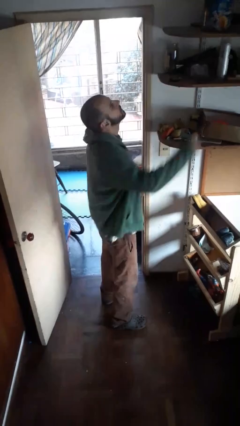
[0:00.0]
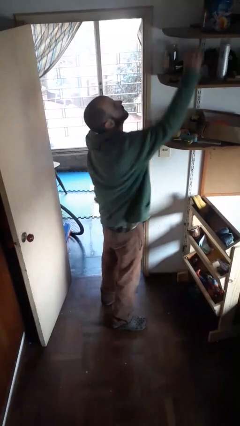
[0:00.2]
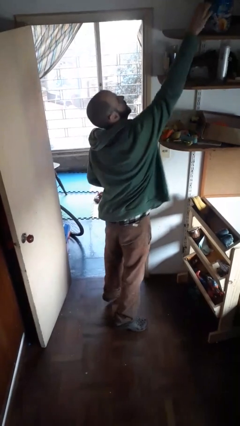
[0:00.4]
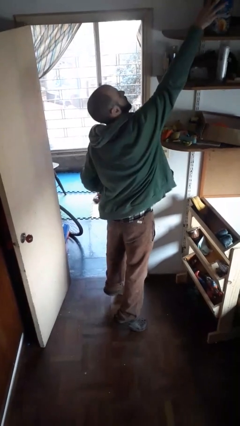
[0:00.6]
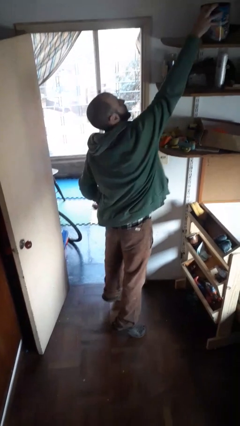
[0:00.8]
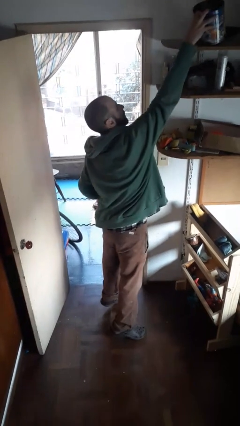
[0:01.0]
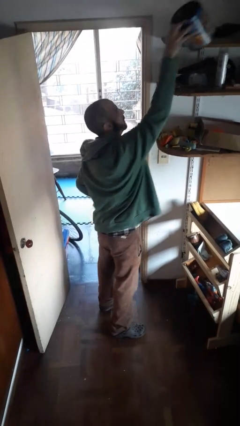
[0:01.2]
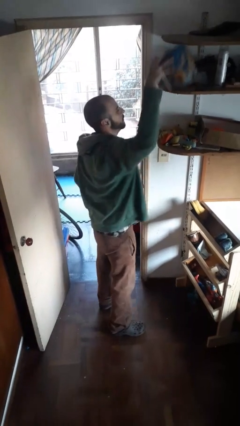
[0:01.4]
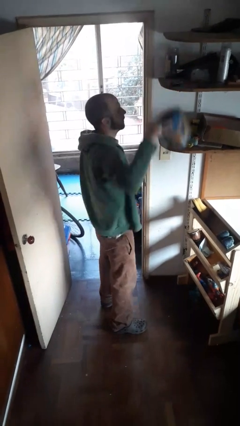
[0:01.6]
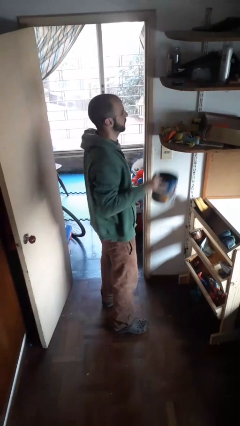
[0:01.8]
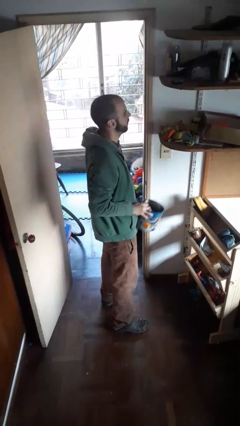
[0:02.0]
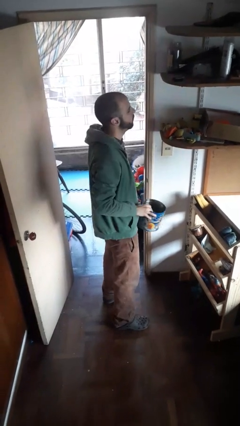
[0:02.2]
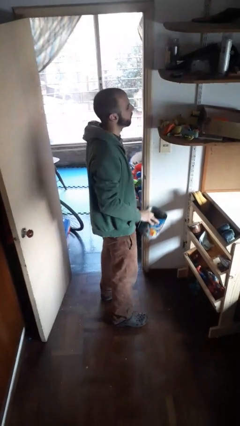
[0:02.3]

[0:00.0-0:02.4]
person picks up object from shelf

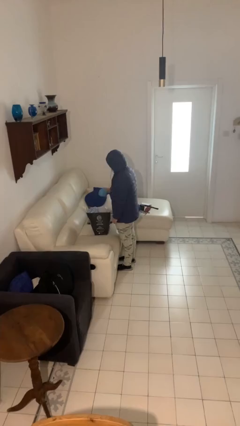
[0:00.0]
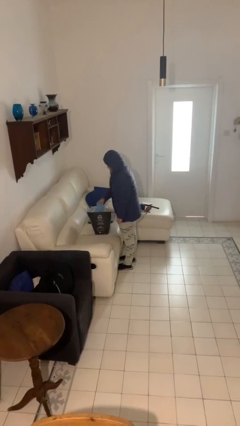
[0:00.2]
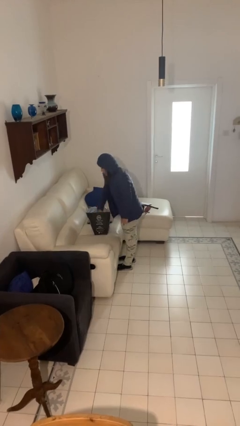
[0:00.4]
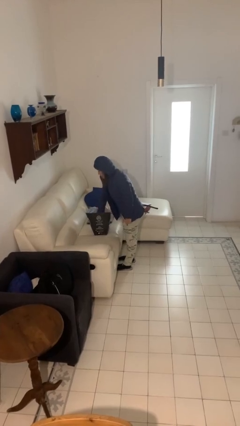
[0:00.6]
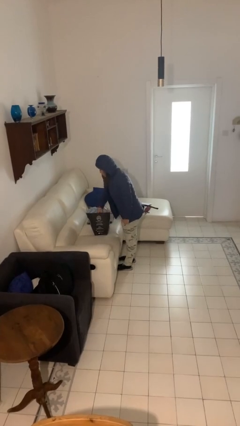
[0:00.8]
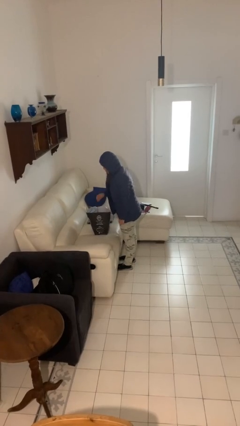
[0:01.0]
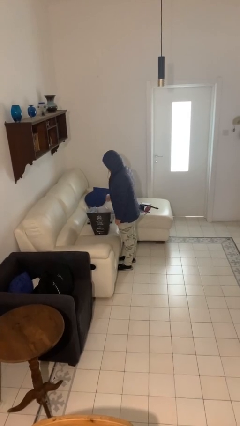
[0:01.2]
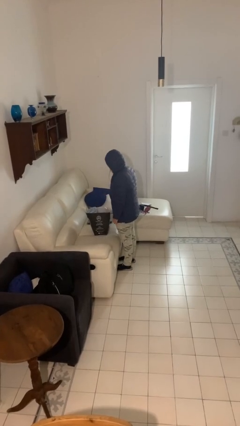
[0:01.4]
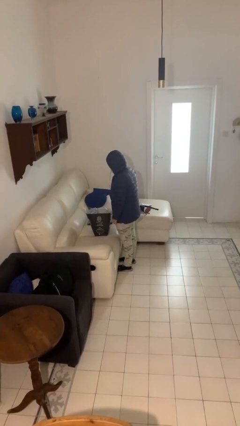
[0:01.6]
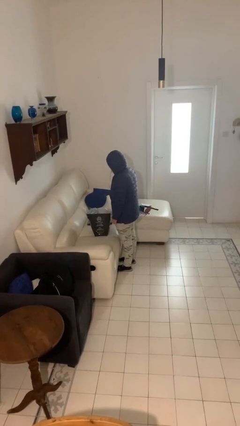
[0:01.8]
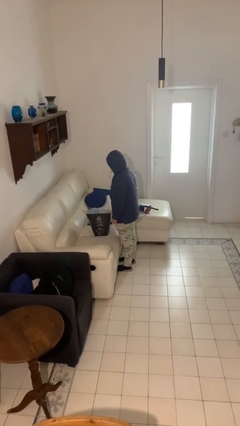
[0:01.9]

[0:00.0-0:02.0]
person puts object into bag

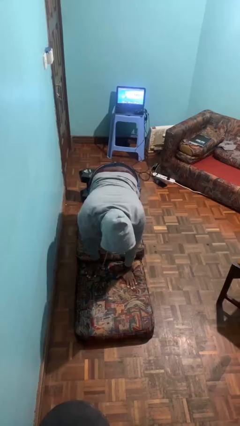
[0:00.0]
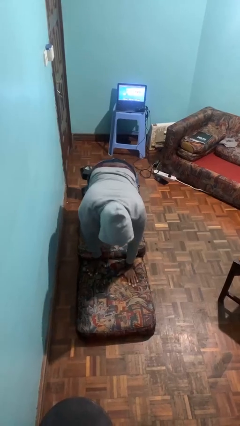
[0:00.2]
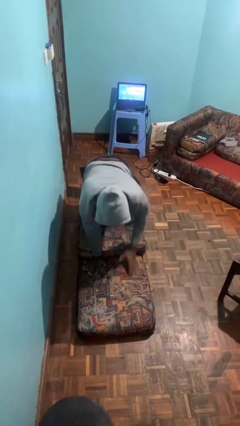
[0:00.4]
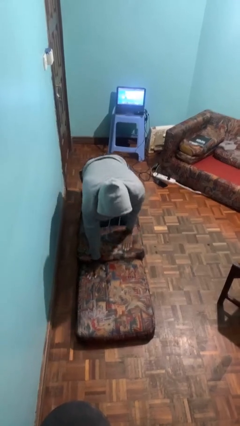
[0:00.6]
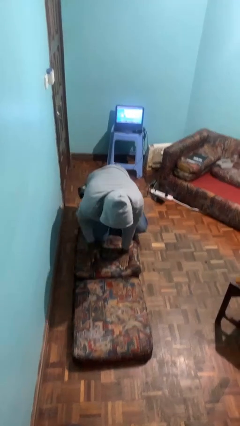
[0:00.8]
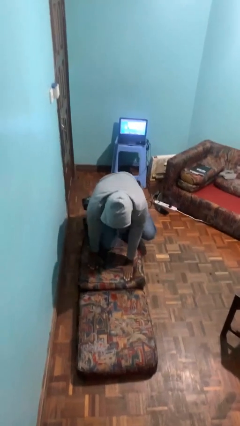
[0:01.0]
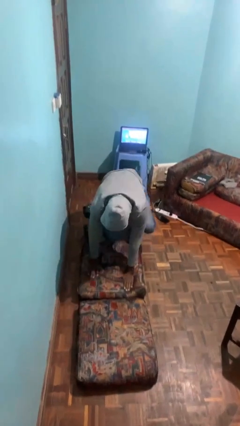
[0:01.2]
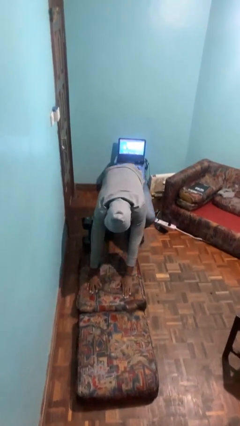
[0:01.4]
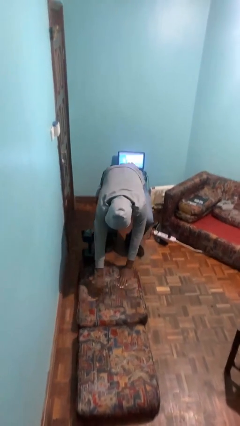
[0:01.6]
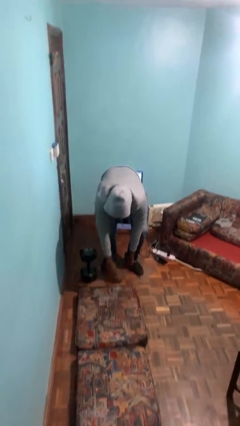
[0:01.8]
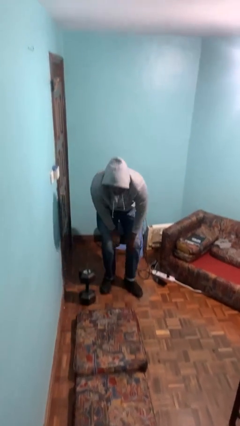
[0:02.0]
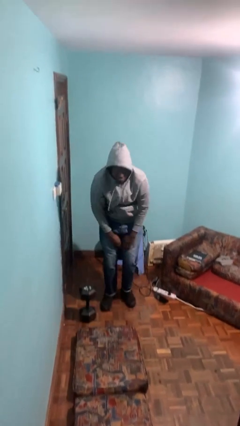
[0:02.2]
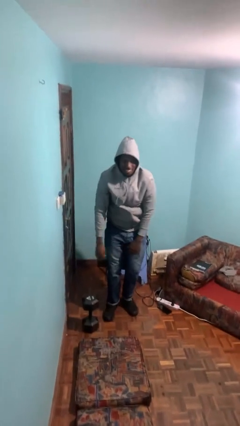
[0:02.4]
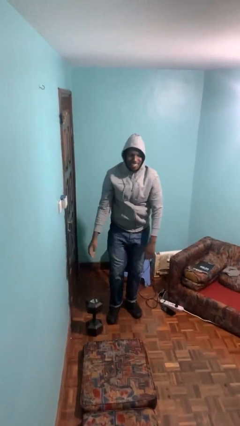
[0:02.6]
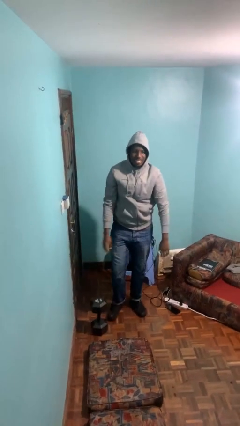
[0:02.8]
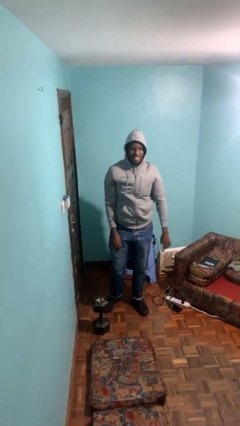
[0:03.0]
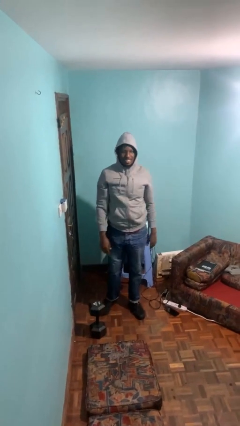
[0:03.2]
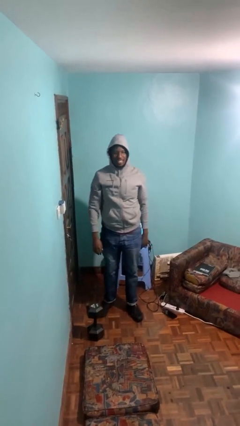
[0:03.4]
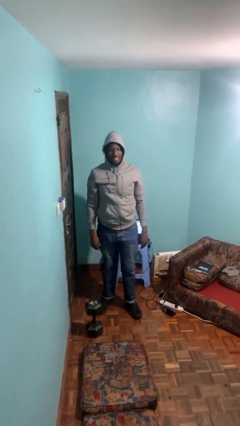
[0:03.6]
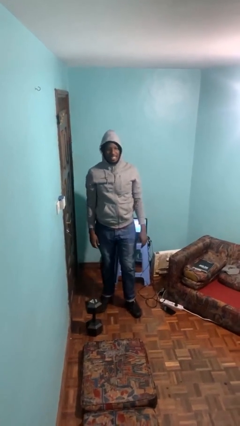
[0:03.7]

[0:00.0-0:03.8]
person stands up from floor

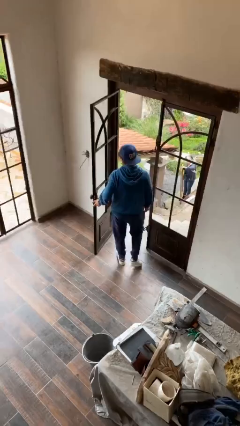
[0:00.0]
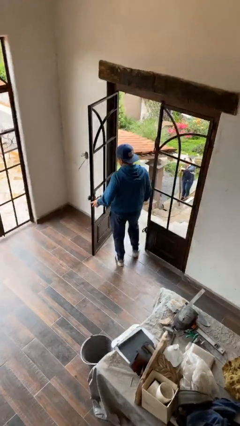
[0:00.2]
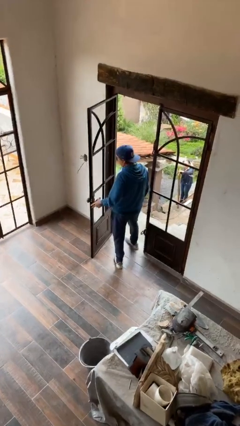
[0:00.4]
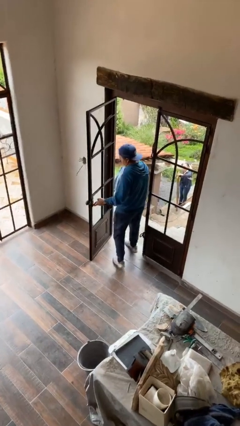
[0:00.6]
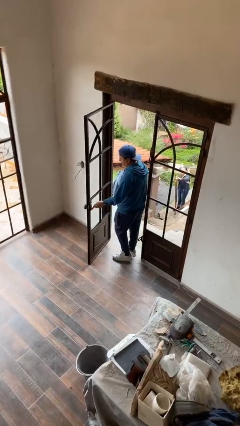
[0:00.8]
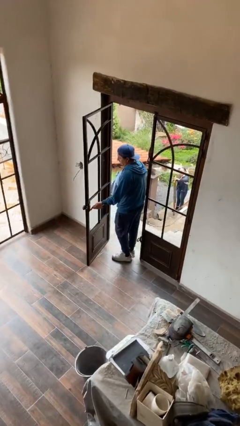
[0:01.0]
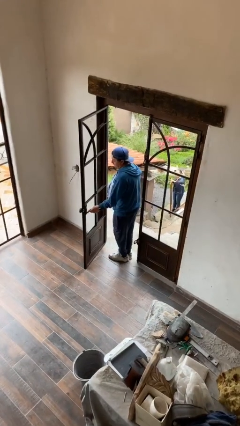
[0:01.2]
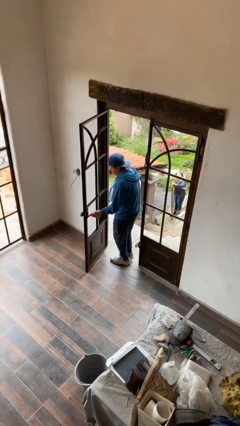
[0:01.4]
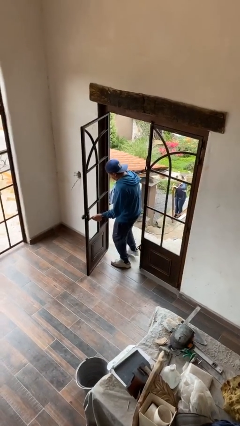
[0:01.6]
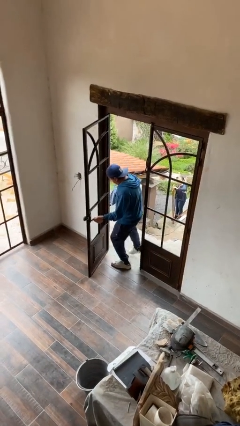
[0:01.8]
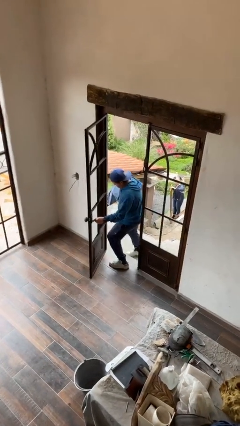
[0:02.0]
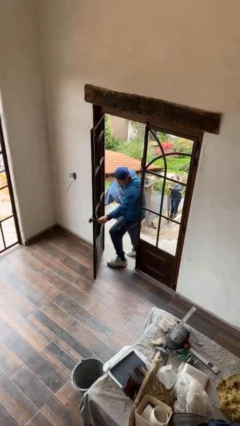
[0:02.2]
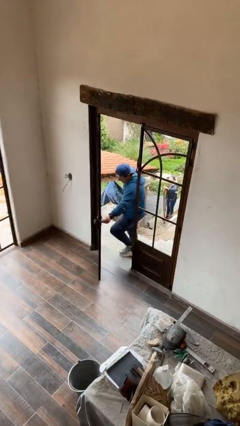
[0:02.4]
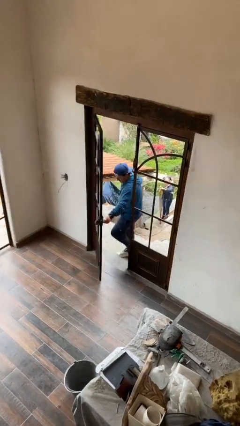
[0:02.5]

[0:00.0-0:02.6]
person exits scene through structure

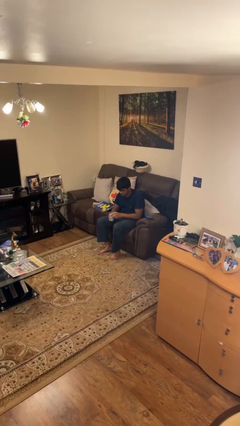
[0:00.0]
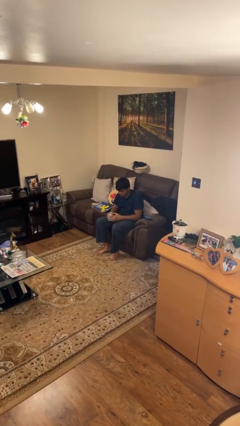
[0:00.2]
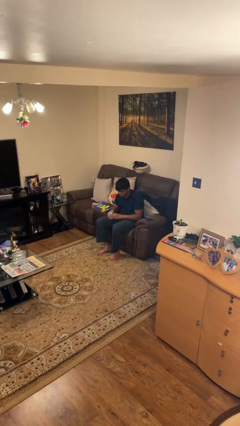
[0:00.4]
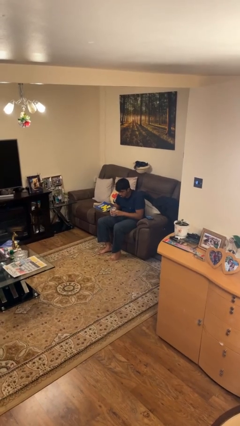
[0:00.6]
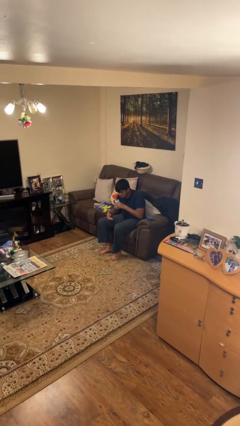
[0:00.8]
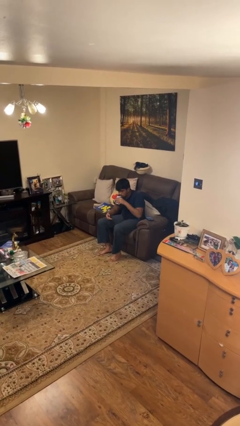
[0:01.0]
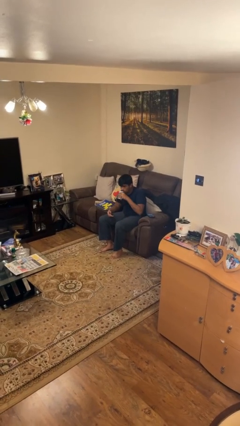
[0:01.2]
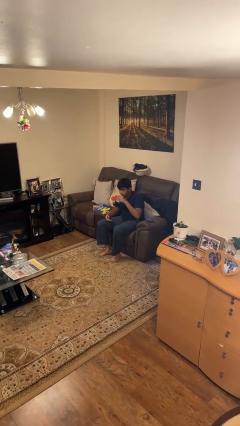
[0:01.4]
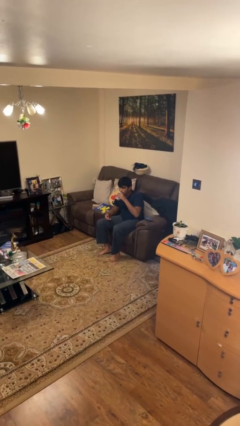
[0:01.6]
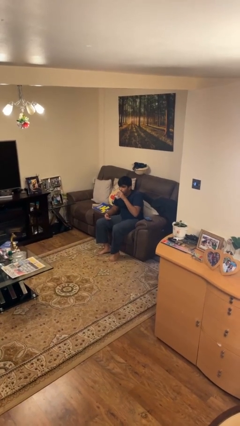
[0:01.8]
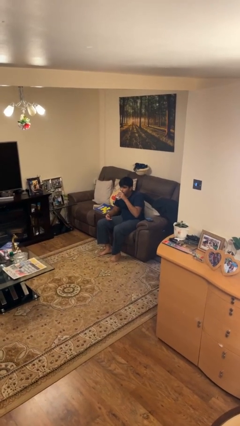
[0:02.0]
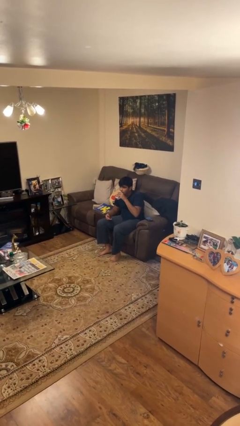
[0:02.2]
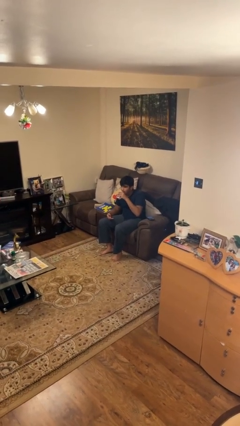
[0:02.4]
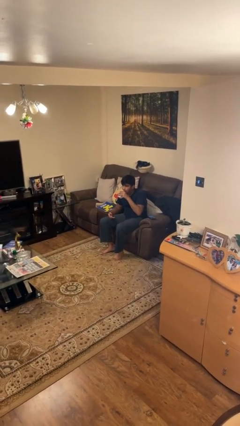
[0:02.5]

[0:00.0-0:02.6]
person drinks from beverage can

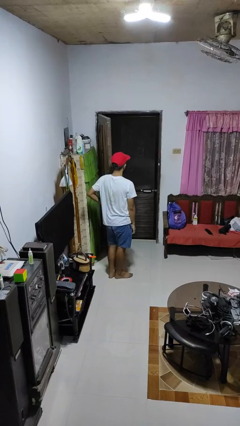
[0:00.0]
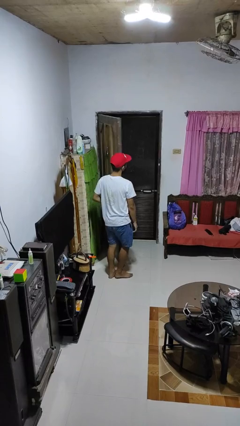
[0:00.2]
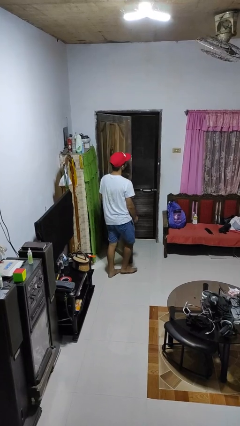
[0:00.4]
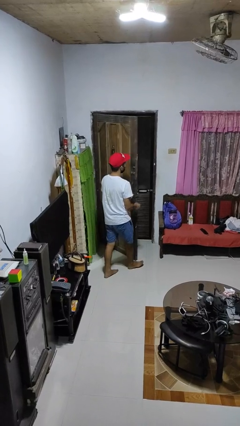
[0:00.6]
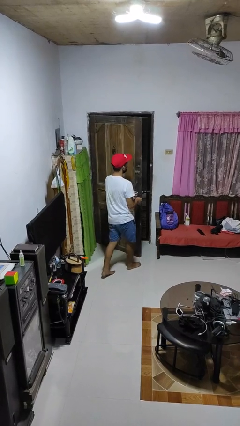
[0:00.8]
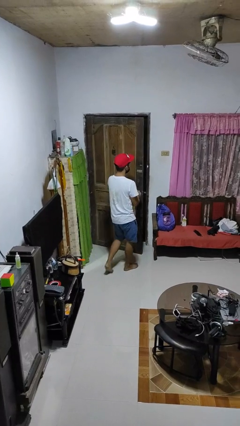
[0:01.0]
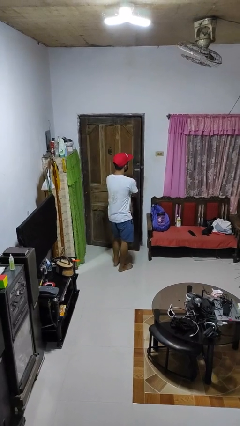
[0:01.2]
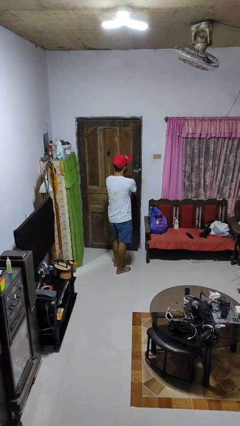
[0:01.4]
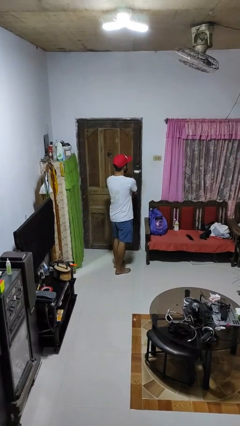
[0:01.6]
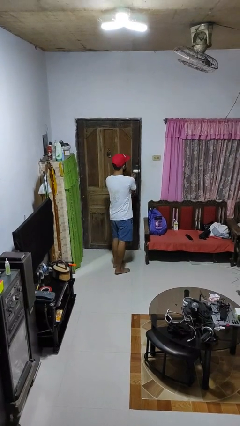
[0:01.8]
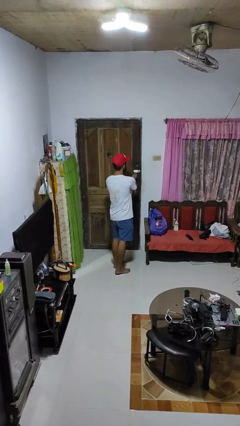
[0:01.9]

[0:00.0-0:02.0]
person closes facility door

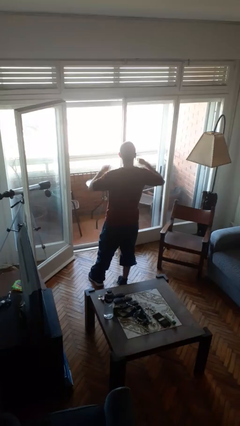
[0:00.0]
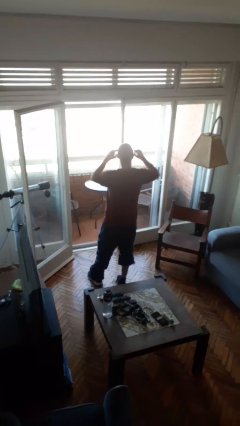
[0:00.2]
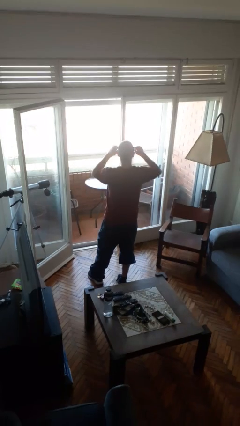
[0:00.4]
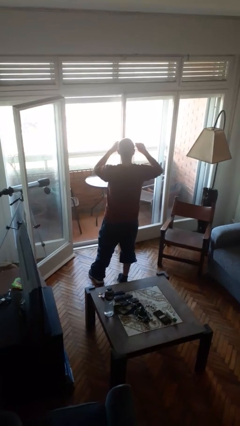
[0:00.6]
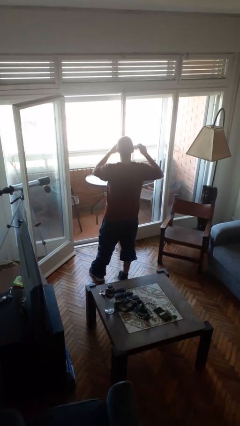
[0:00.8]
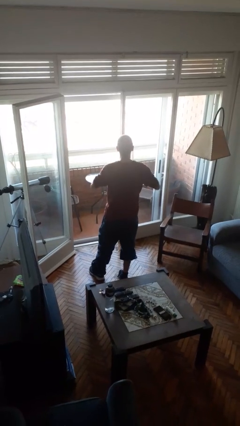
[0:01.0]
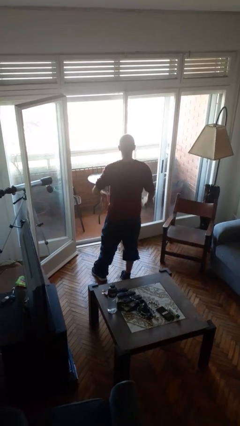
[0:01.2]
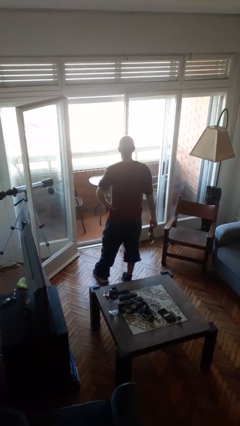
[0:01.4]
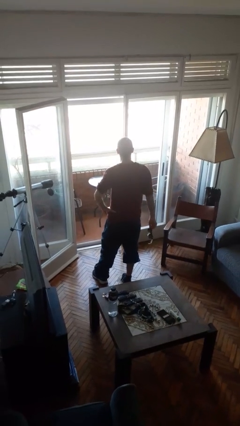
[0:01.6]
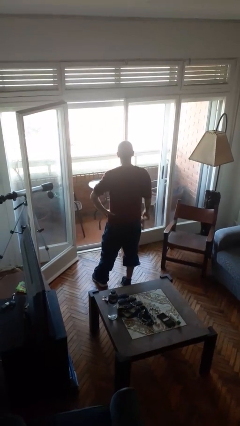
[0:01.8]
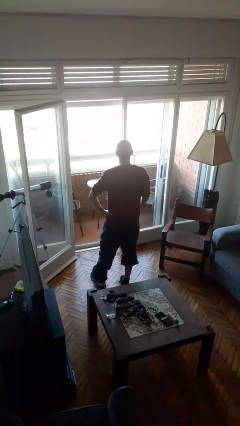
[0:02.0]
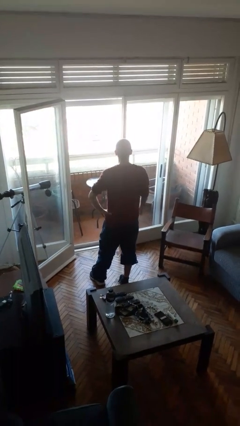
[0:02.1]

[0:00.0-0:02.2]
person takes off sunglasses
